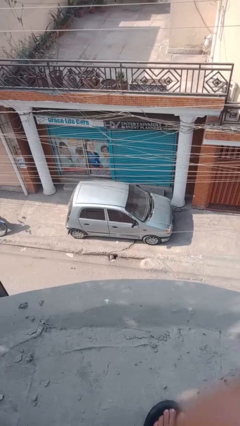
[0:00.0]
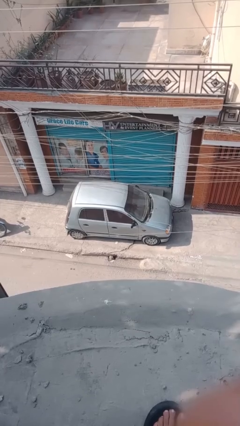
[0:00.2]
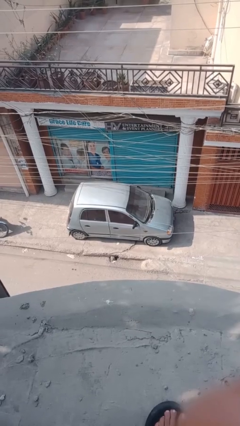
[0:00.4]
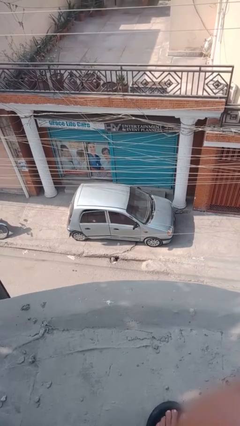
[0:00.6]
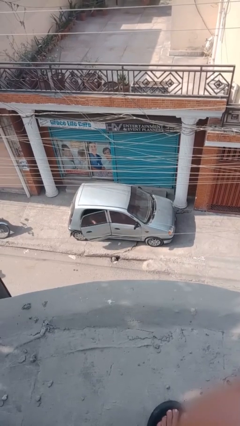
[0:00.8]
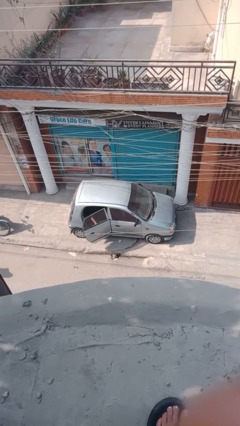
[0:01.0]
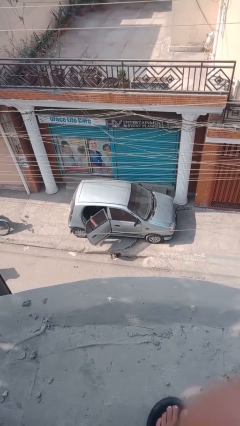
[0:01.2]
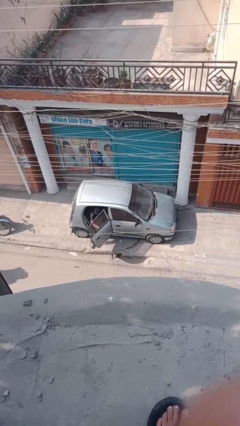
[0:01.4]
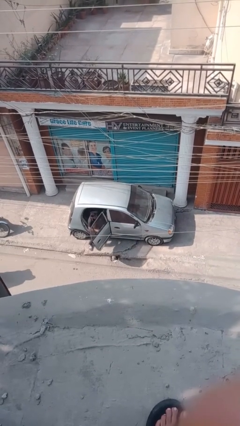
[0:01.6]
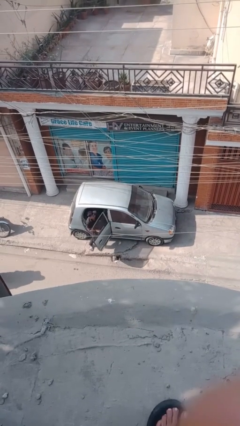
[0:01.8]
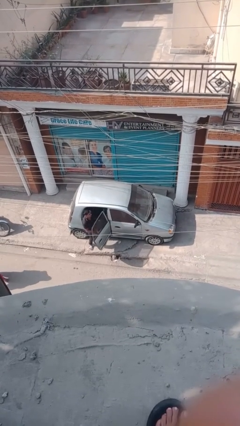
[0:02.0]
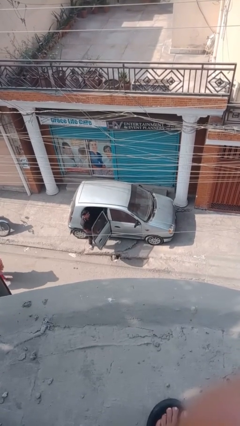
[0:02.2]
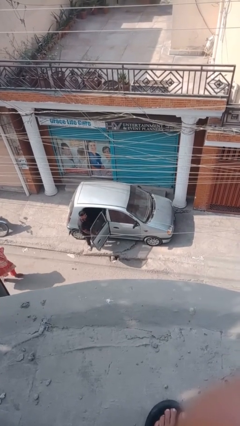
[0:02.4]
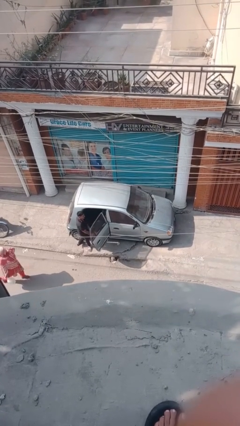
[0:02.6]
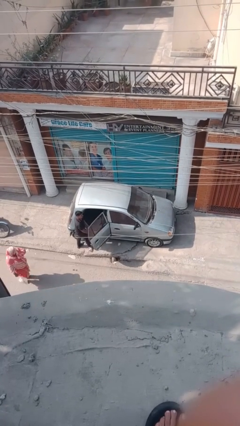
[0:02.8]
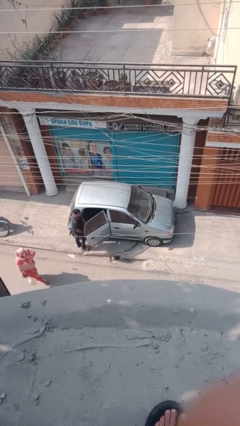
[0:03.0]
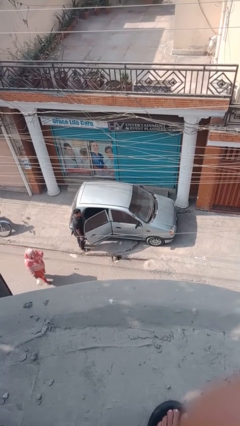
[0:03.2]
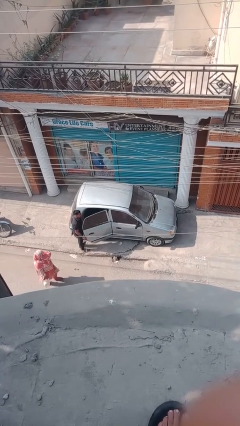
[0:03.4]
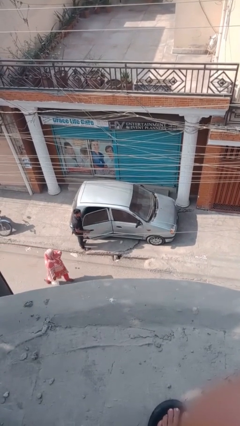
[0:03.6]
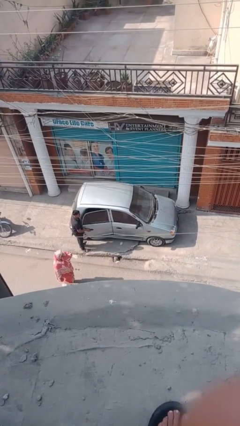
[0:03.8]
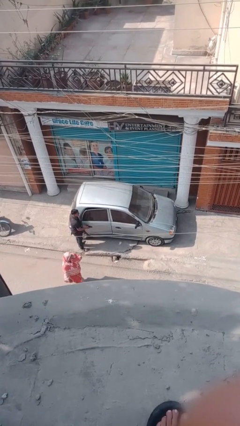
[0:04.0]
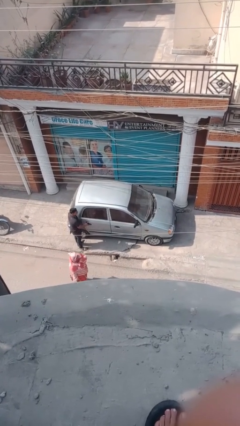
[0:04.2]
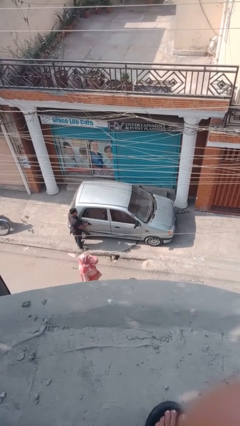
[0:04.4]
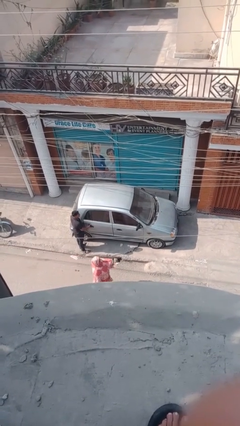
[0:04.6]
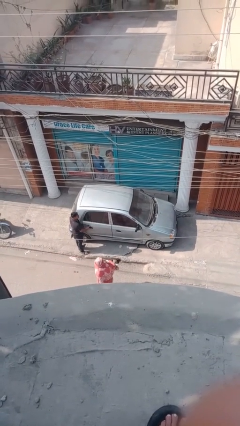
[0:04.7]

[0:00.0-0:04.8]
car drops off person

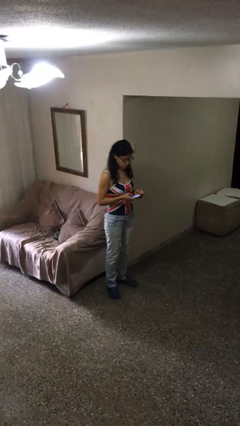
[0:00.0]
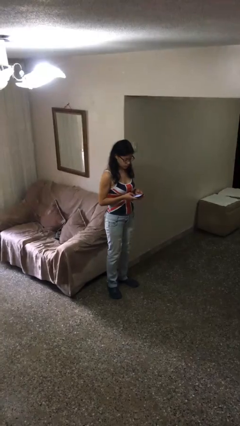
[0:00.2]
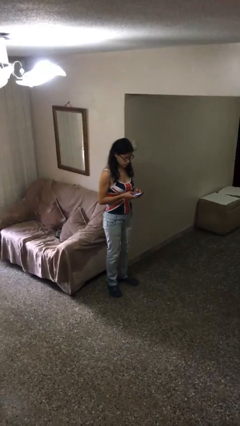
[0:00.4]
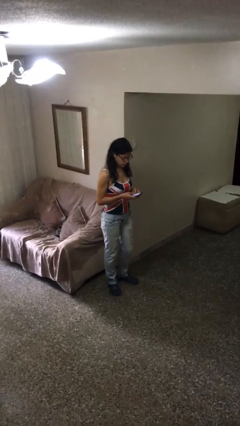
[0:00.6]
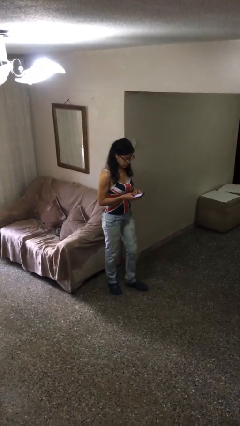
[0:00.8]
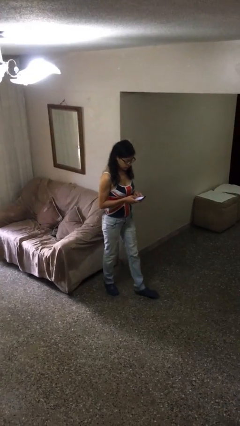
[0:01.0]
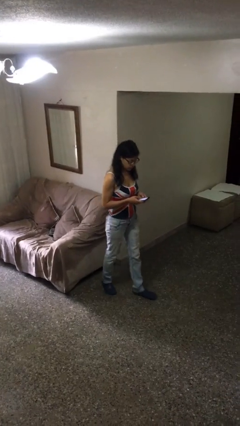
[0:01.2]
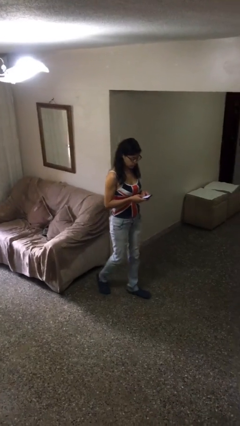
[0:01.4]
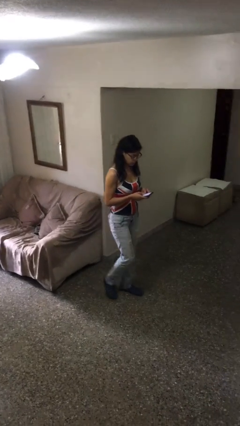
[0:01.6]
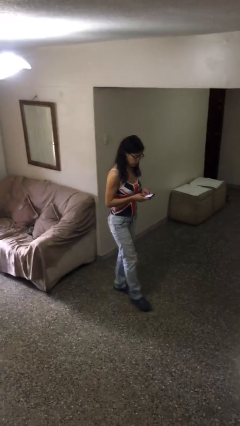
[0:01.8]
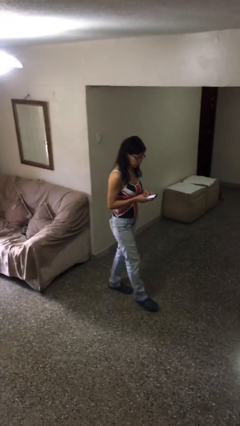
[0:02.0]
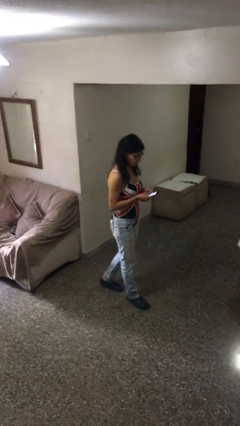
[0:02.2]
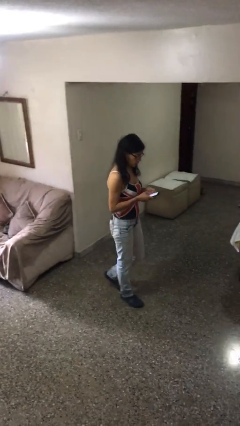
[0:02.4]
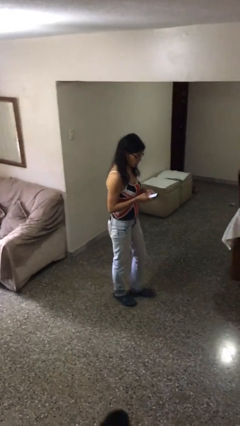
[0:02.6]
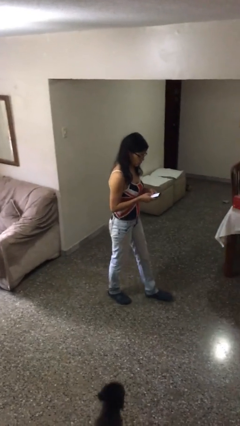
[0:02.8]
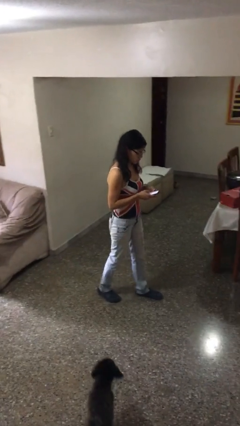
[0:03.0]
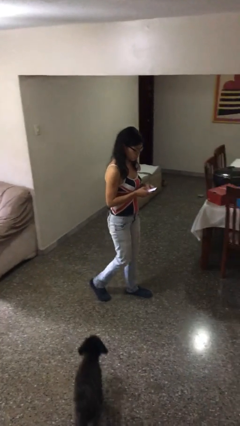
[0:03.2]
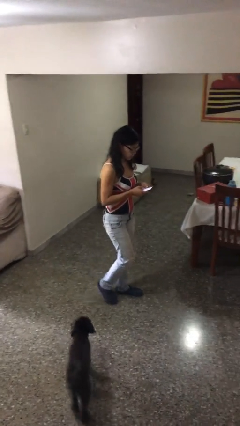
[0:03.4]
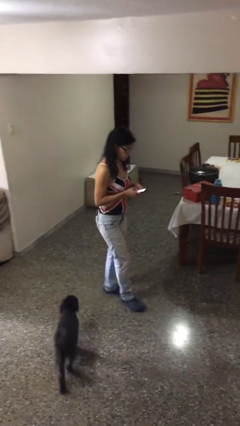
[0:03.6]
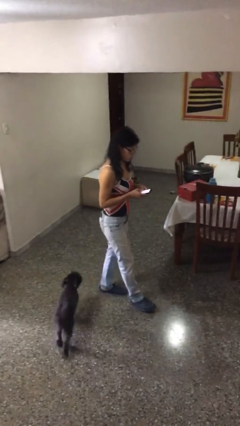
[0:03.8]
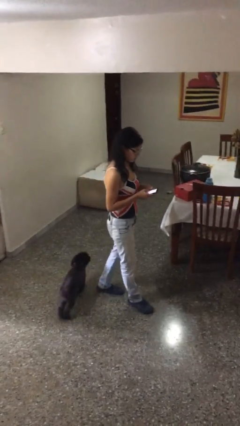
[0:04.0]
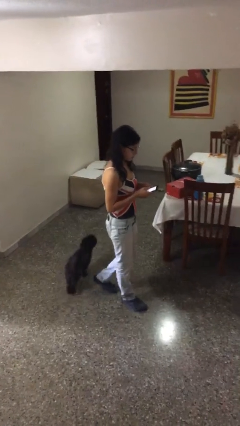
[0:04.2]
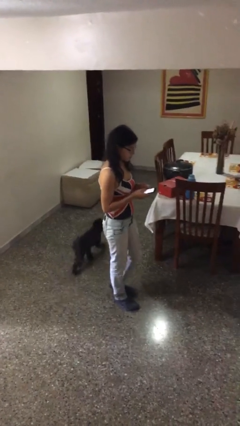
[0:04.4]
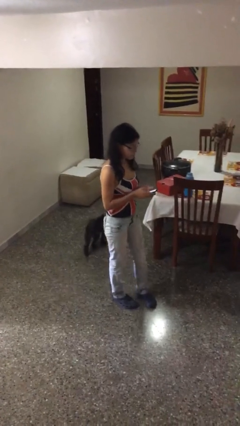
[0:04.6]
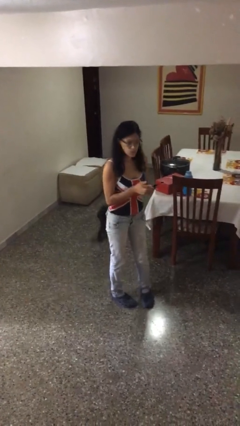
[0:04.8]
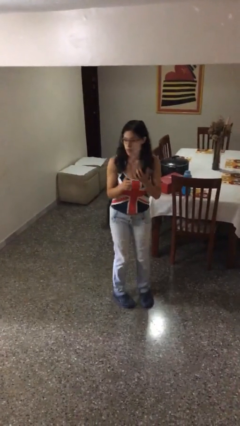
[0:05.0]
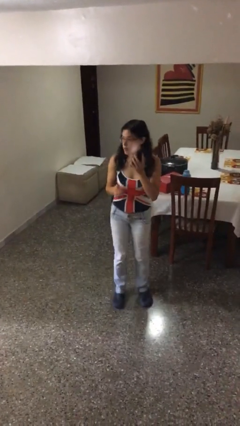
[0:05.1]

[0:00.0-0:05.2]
person texts on phone

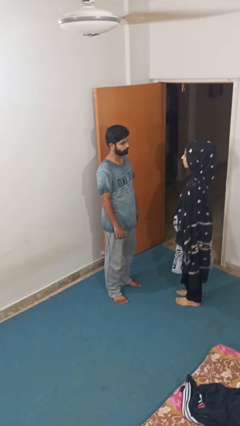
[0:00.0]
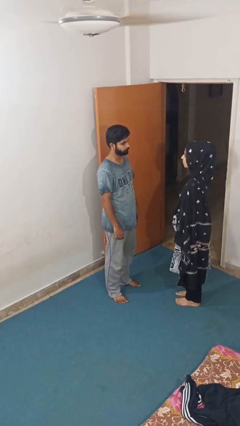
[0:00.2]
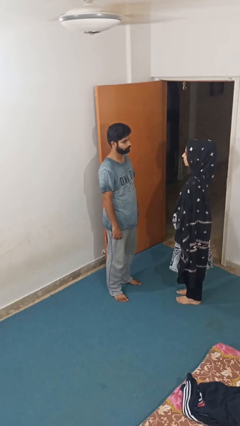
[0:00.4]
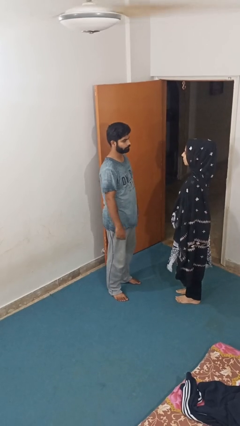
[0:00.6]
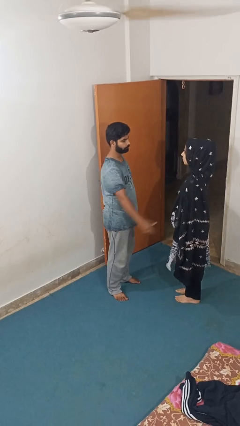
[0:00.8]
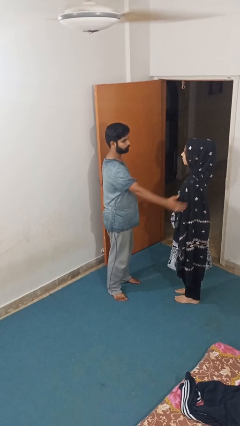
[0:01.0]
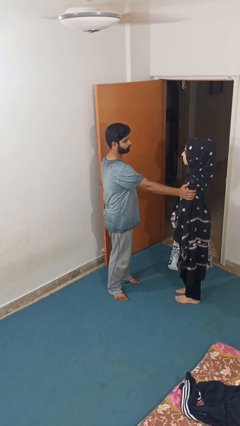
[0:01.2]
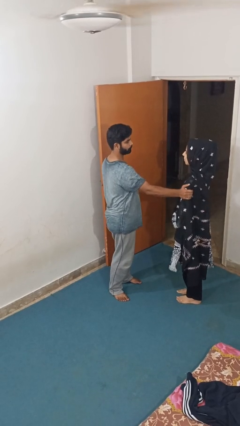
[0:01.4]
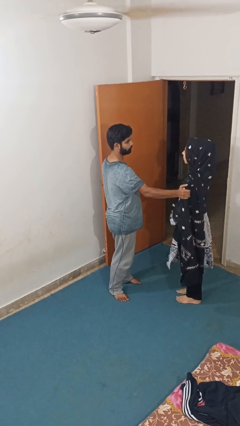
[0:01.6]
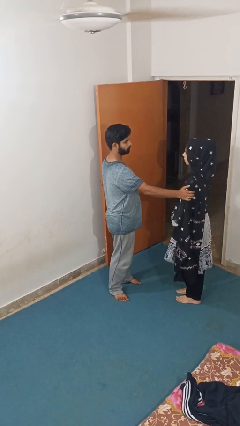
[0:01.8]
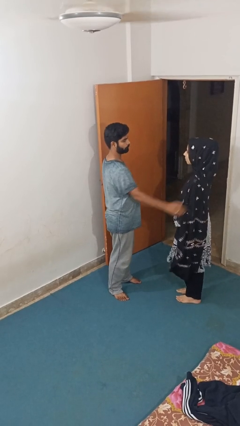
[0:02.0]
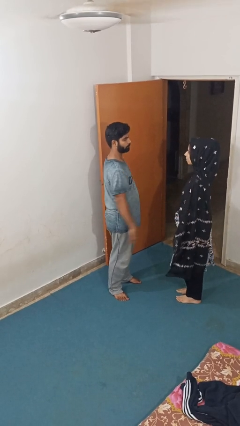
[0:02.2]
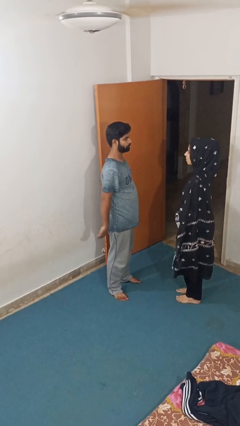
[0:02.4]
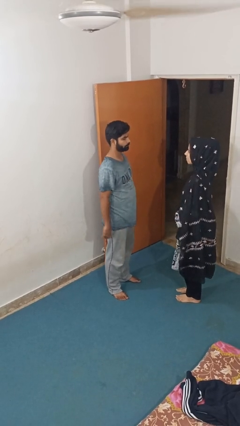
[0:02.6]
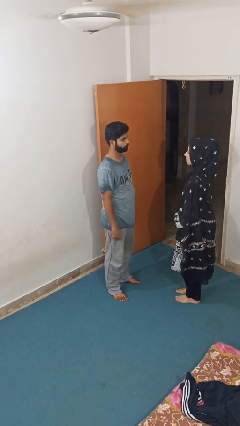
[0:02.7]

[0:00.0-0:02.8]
person grabs person by bicep

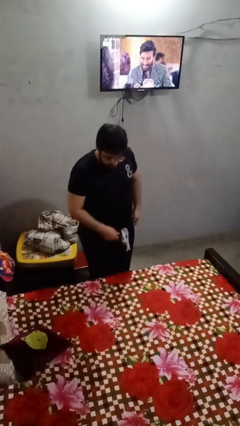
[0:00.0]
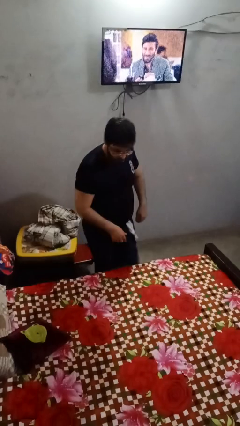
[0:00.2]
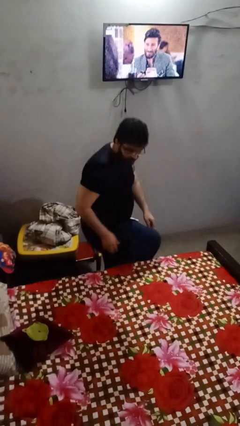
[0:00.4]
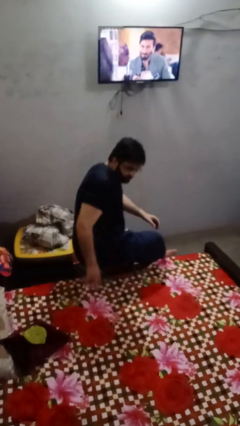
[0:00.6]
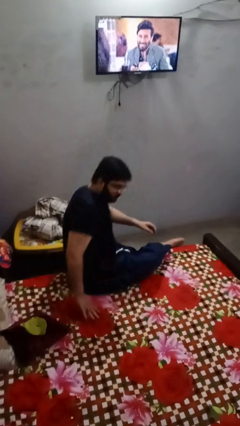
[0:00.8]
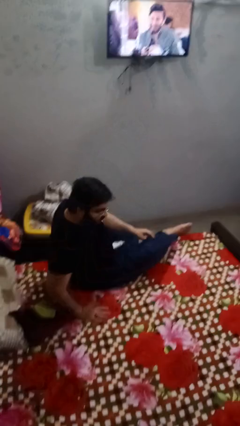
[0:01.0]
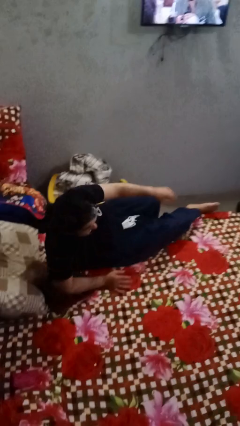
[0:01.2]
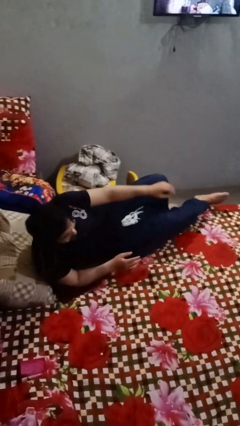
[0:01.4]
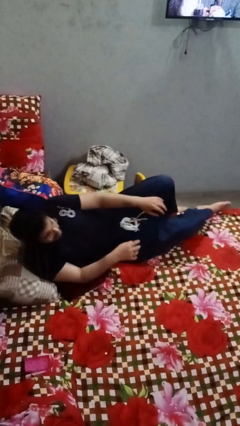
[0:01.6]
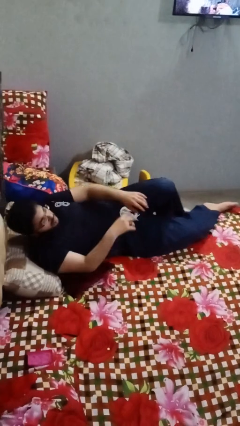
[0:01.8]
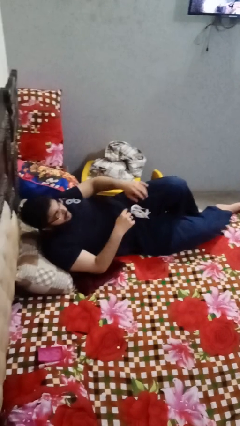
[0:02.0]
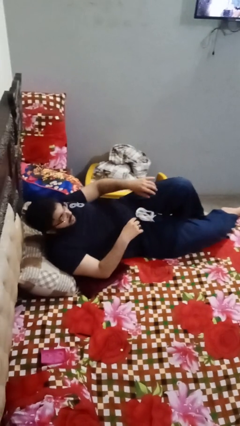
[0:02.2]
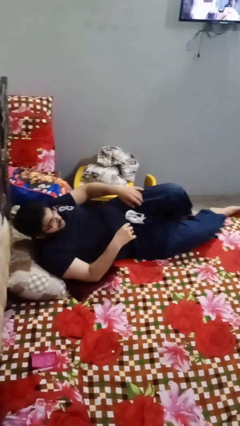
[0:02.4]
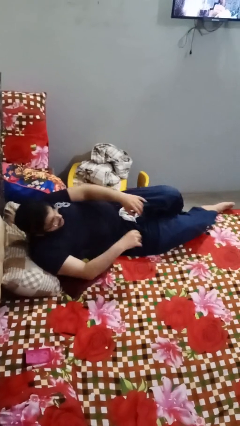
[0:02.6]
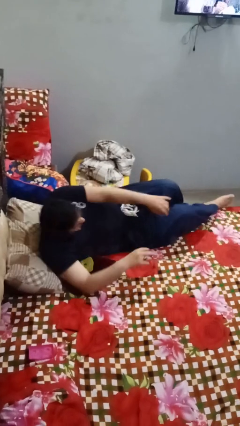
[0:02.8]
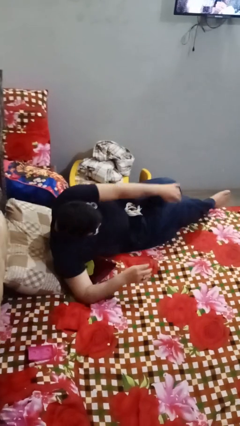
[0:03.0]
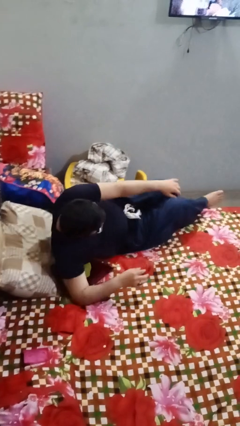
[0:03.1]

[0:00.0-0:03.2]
person lies down on bed

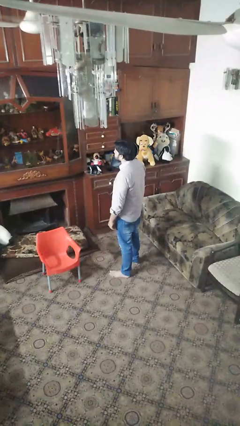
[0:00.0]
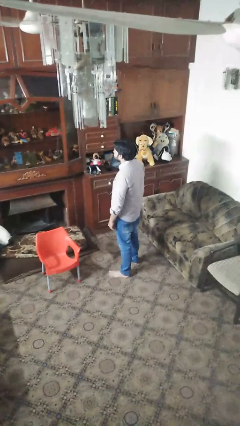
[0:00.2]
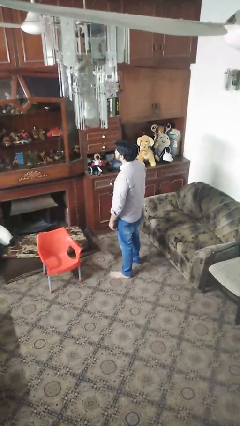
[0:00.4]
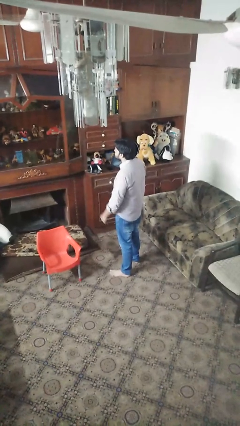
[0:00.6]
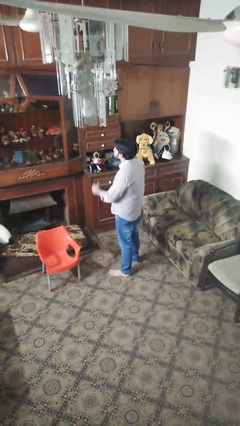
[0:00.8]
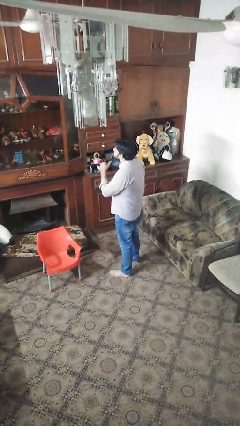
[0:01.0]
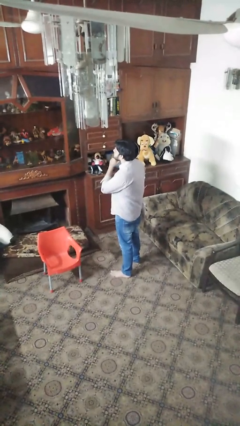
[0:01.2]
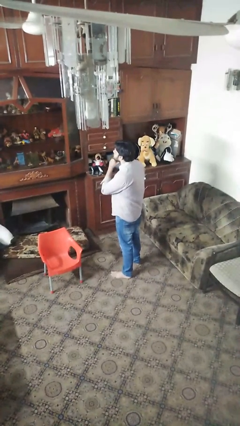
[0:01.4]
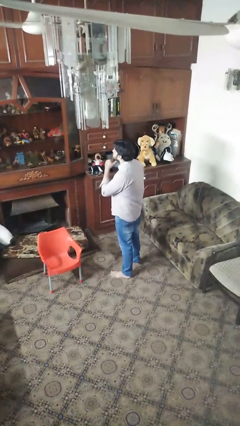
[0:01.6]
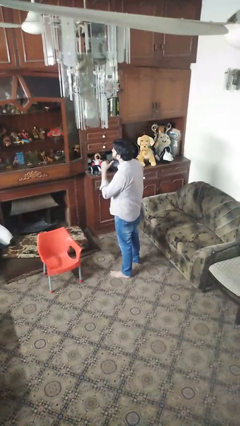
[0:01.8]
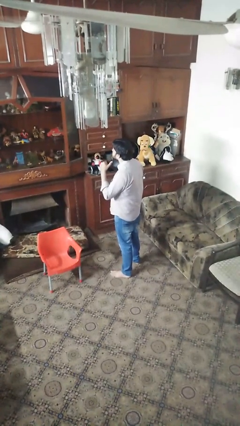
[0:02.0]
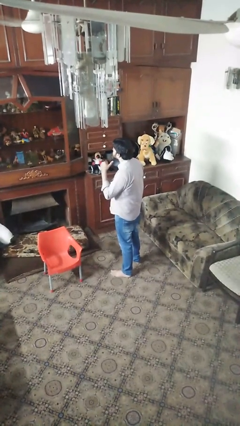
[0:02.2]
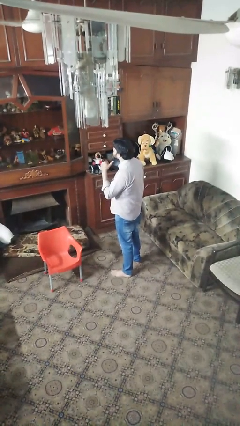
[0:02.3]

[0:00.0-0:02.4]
person gestures cut
